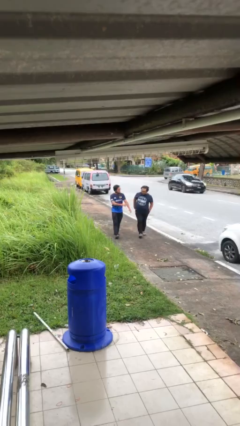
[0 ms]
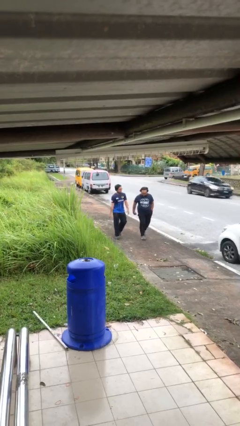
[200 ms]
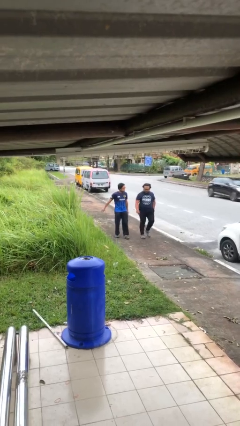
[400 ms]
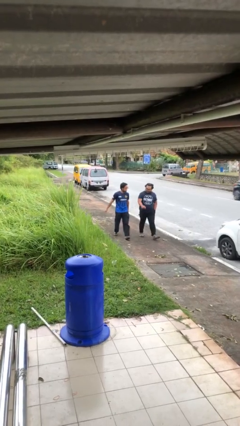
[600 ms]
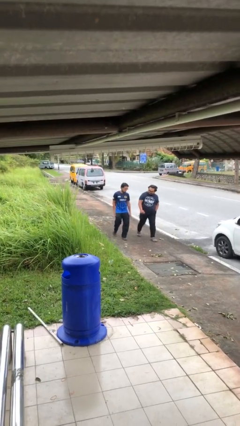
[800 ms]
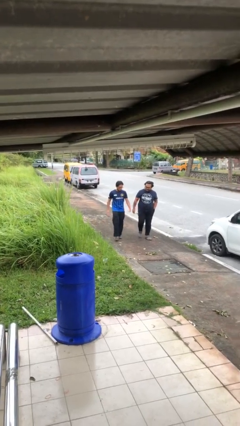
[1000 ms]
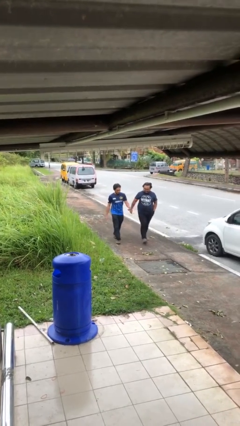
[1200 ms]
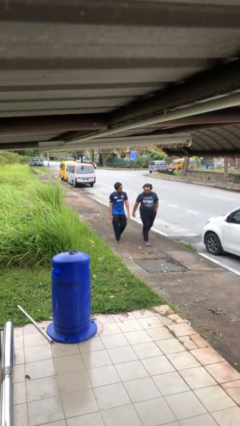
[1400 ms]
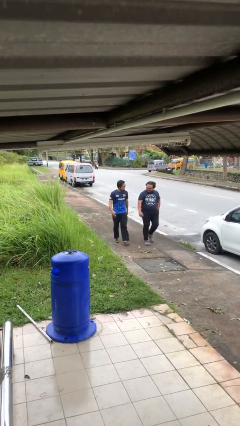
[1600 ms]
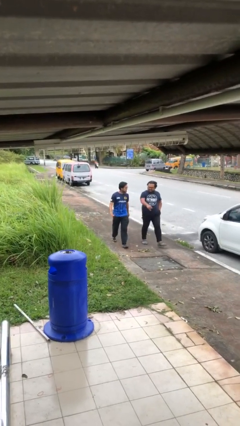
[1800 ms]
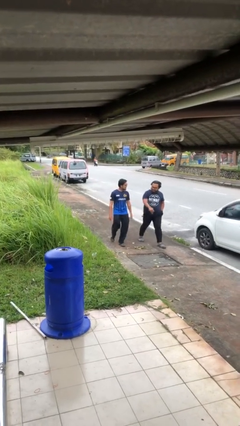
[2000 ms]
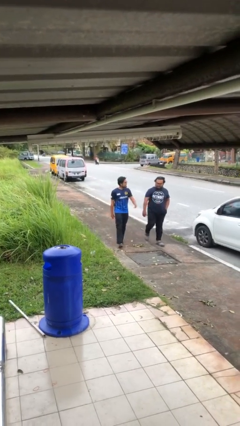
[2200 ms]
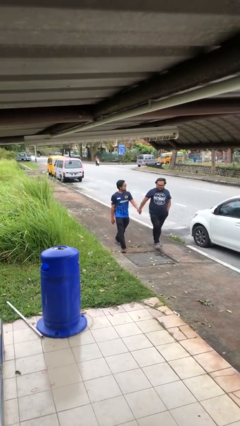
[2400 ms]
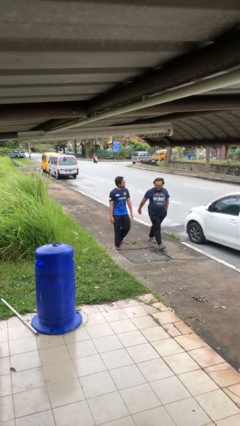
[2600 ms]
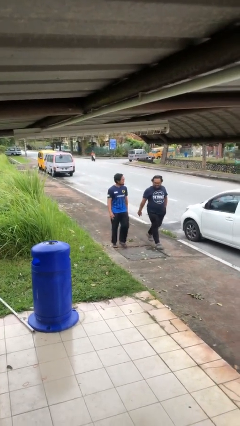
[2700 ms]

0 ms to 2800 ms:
person talks to person

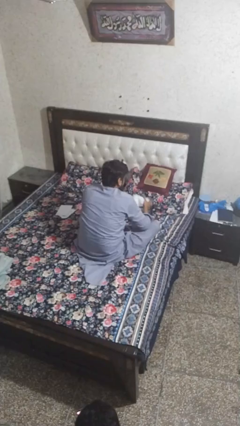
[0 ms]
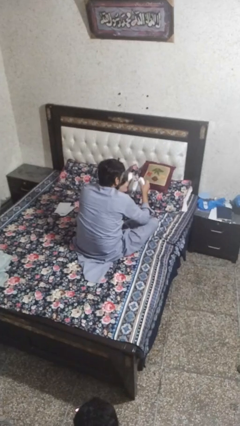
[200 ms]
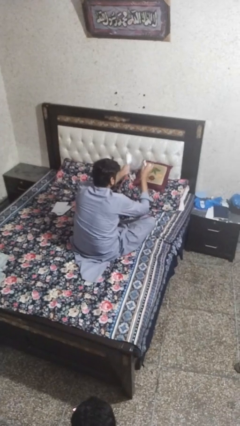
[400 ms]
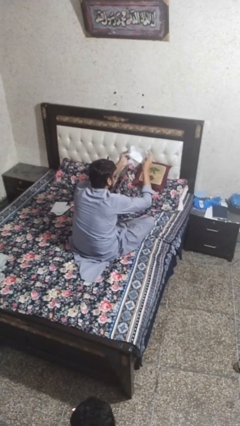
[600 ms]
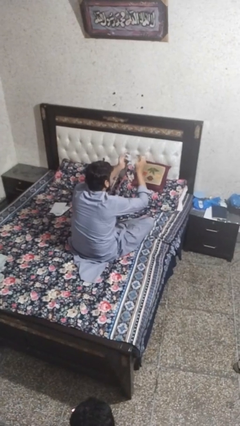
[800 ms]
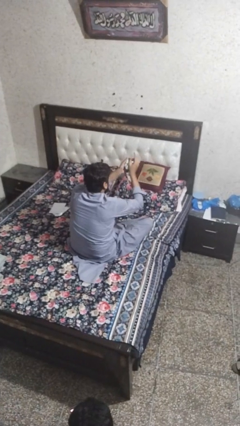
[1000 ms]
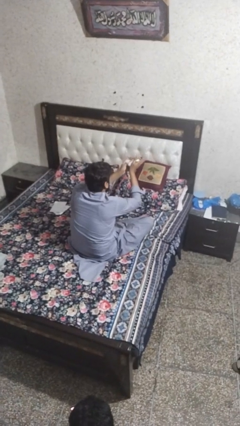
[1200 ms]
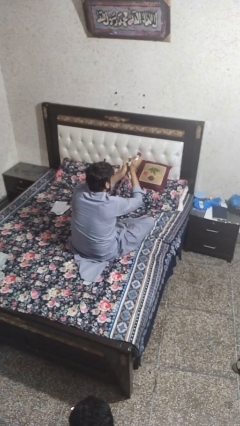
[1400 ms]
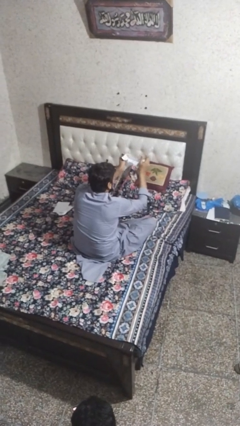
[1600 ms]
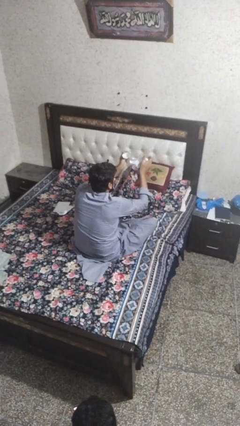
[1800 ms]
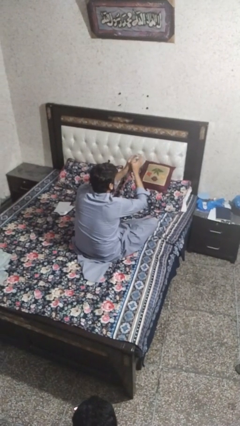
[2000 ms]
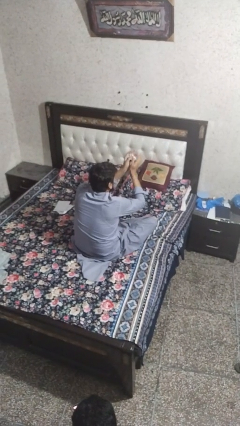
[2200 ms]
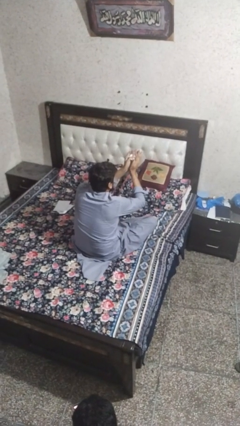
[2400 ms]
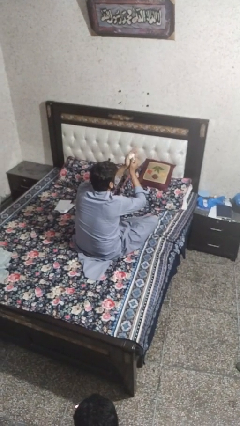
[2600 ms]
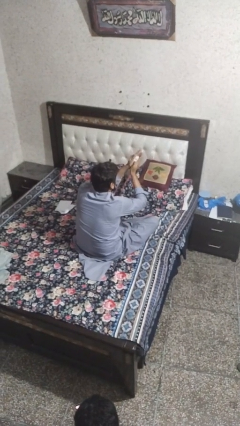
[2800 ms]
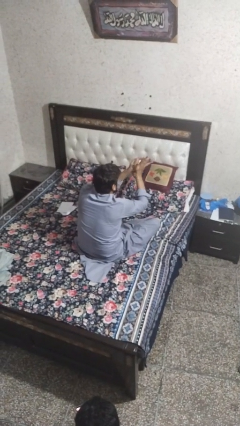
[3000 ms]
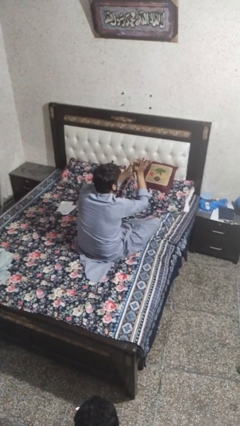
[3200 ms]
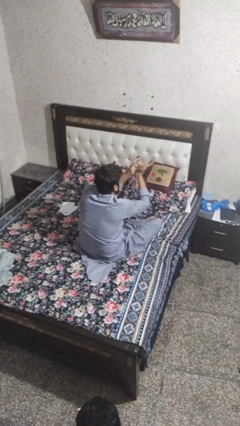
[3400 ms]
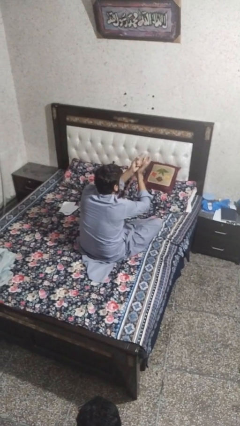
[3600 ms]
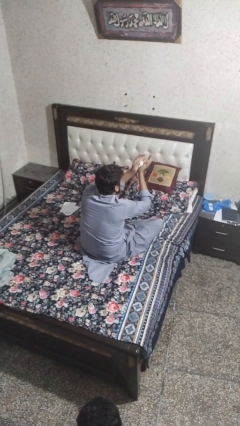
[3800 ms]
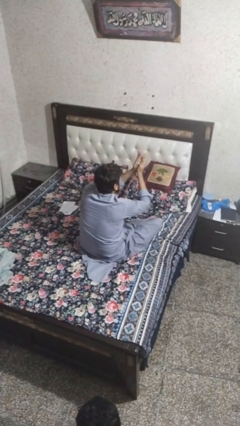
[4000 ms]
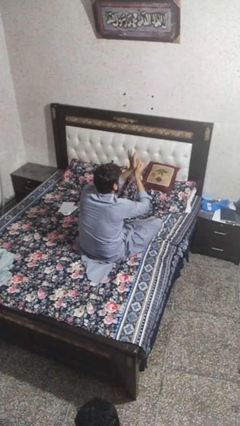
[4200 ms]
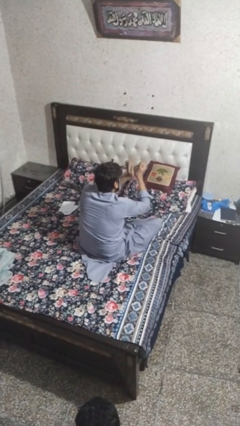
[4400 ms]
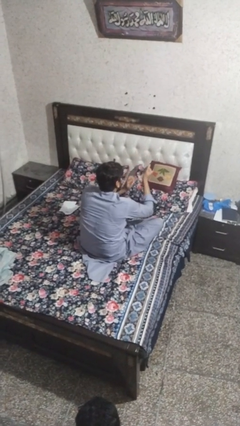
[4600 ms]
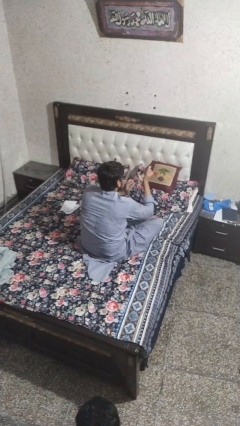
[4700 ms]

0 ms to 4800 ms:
person crumples paper

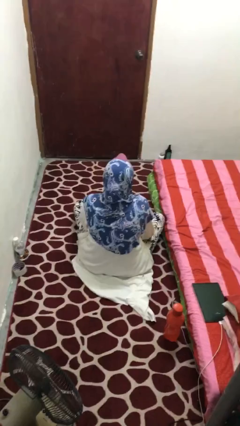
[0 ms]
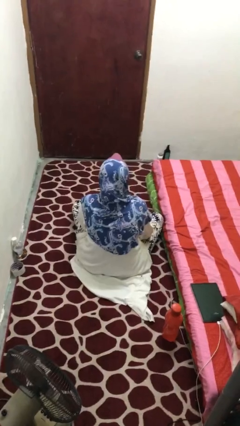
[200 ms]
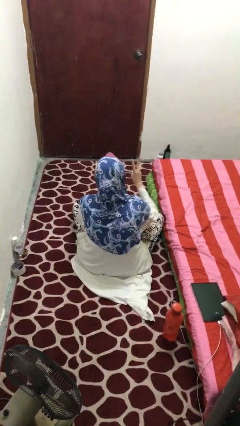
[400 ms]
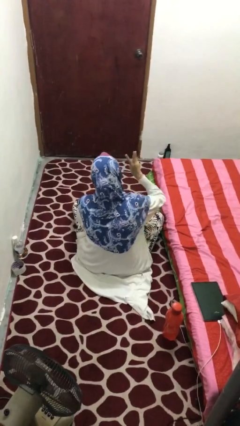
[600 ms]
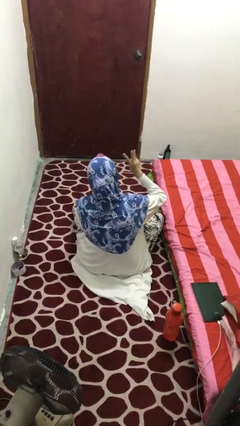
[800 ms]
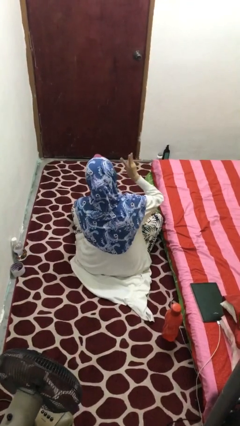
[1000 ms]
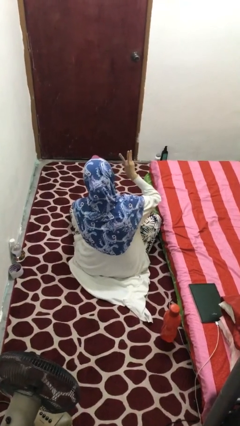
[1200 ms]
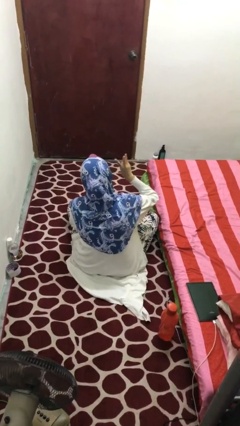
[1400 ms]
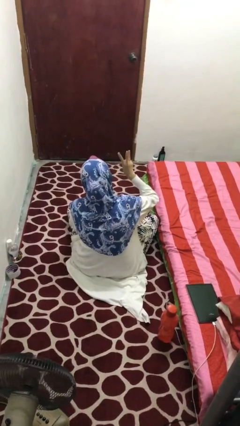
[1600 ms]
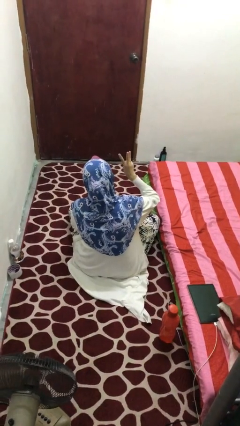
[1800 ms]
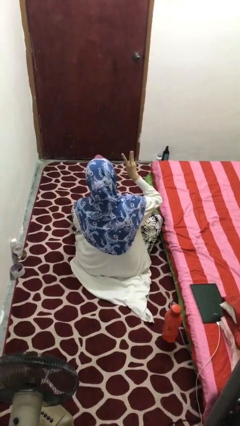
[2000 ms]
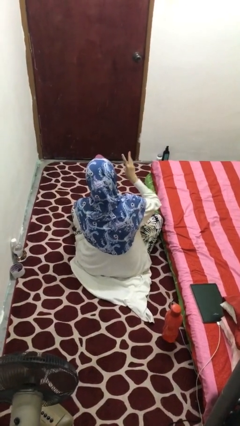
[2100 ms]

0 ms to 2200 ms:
person gestures number three

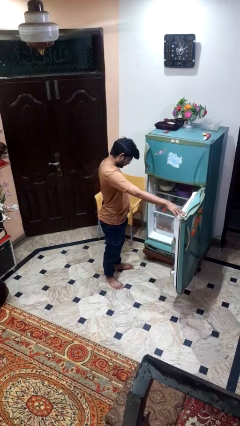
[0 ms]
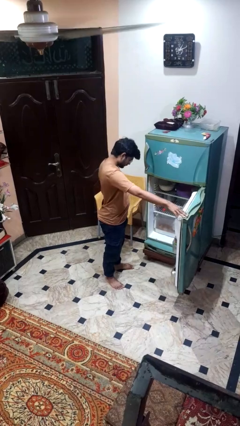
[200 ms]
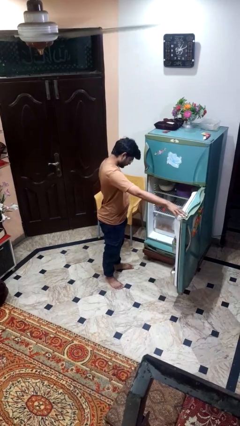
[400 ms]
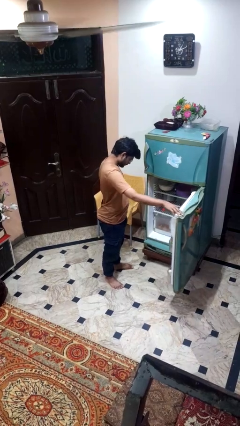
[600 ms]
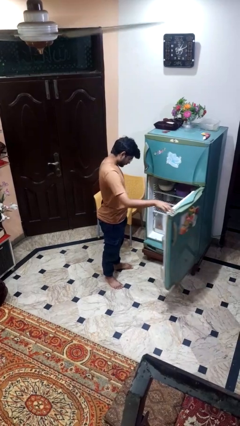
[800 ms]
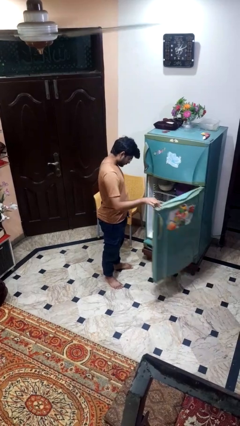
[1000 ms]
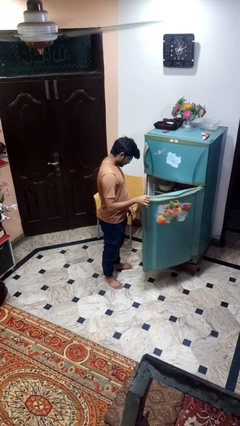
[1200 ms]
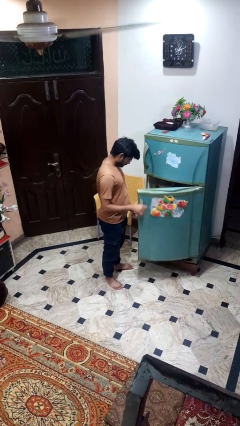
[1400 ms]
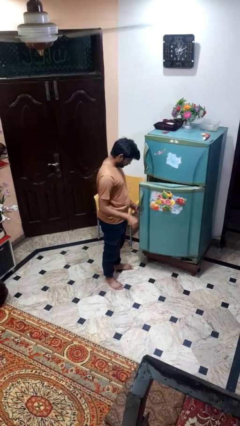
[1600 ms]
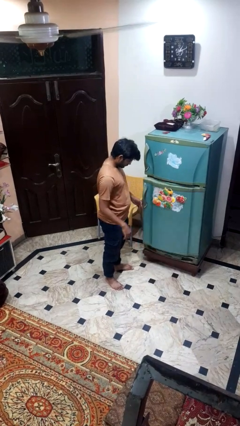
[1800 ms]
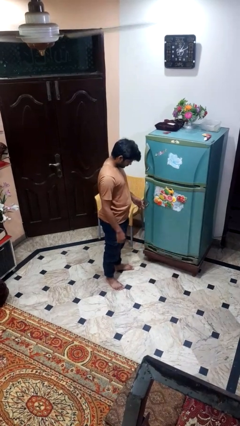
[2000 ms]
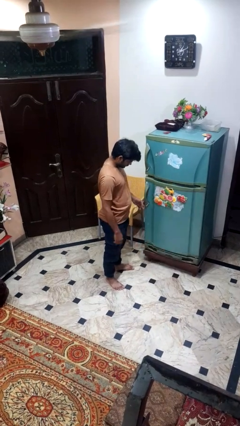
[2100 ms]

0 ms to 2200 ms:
person closes refrigerator

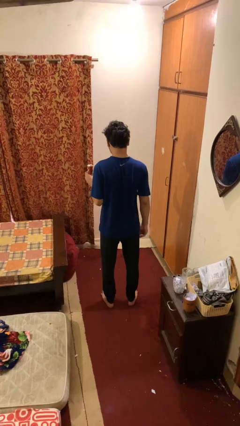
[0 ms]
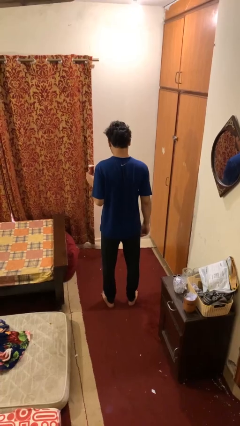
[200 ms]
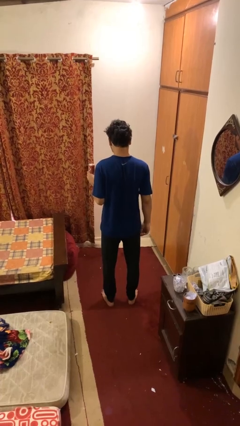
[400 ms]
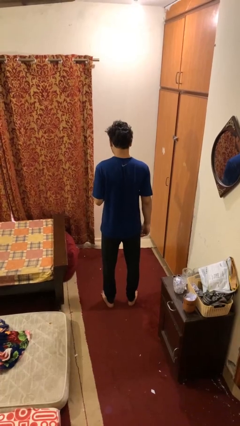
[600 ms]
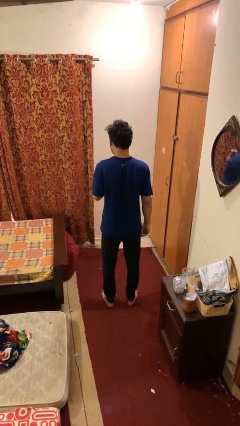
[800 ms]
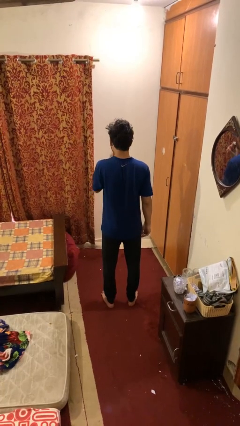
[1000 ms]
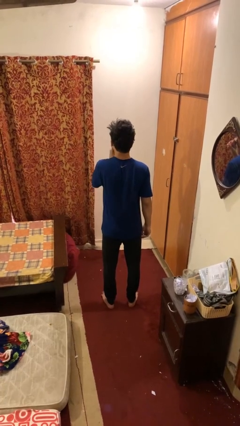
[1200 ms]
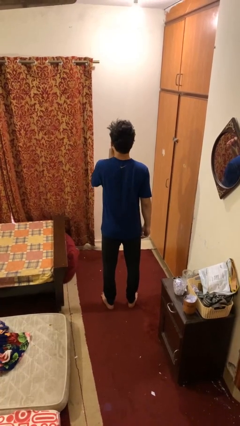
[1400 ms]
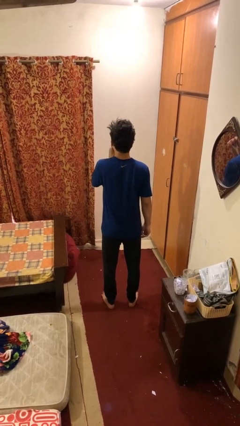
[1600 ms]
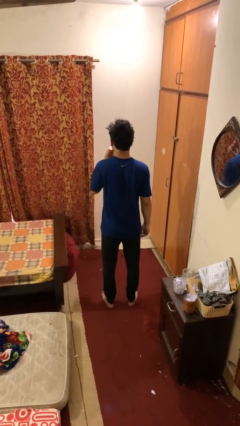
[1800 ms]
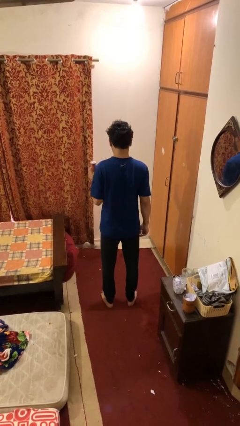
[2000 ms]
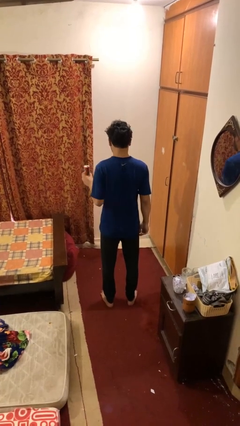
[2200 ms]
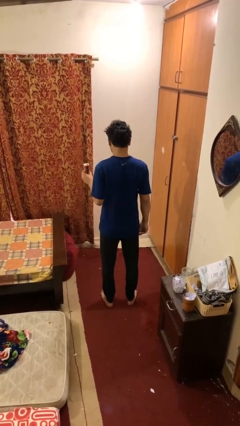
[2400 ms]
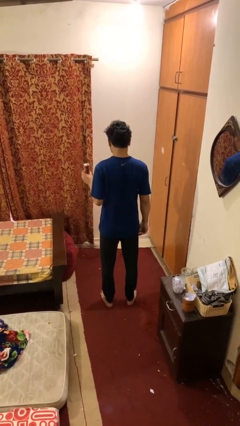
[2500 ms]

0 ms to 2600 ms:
person drinks from beverage can

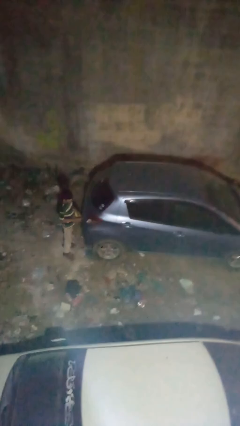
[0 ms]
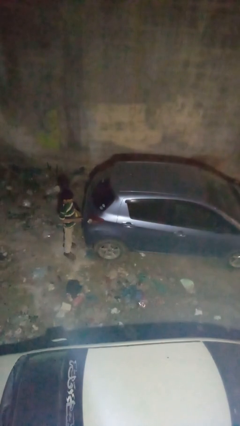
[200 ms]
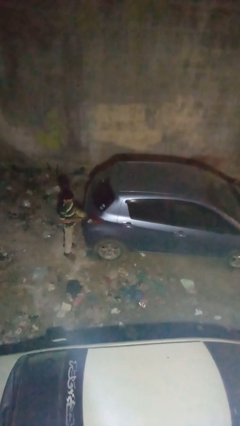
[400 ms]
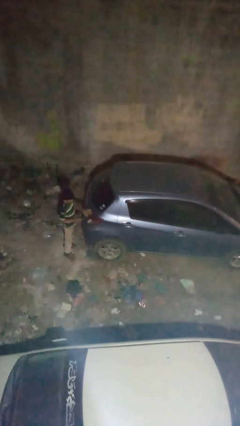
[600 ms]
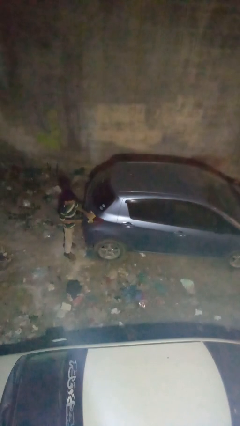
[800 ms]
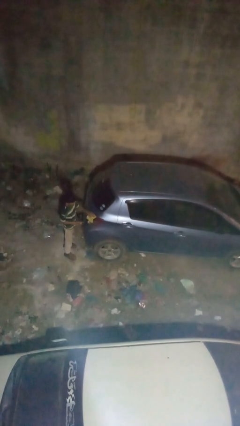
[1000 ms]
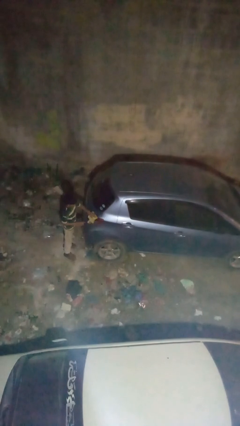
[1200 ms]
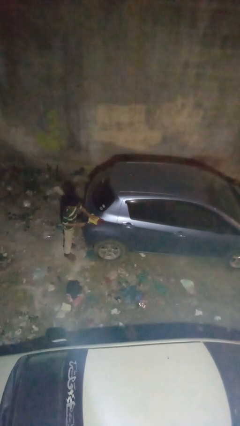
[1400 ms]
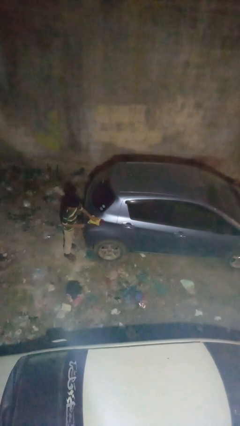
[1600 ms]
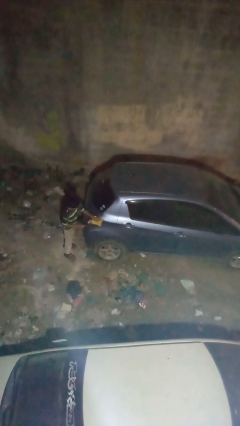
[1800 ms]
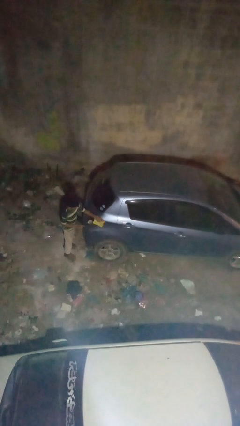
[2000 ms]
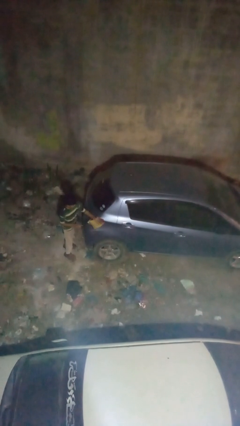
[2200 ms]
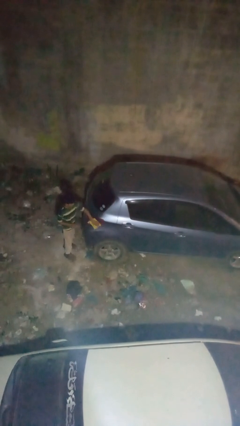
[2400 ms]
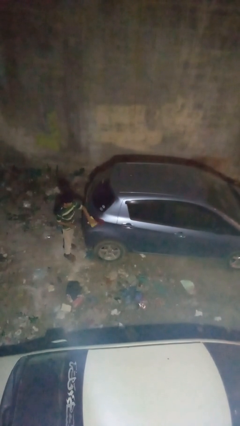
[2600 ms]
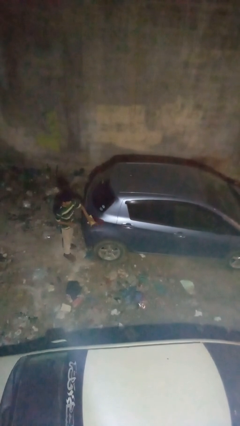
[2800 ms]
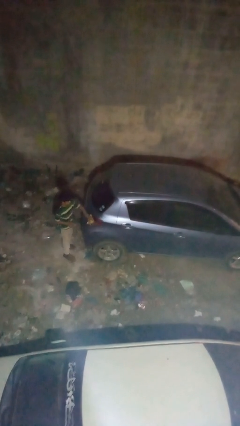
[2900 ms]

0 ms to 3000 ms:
person polishes car with rag
